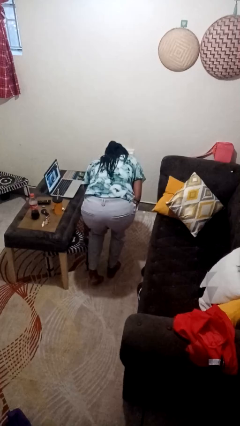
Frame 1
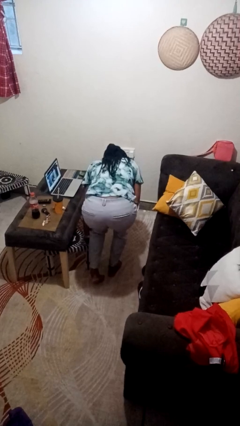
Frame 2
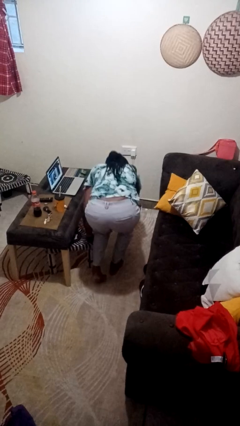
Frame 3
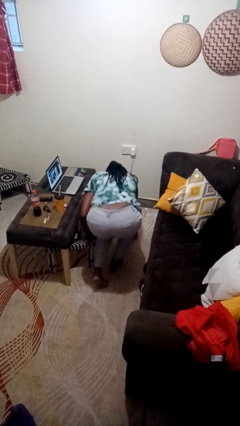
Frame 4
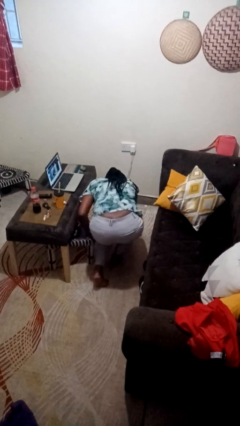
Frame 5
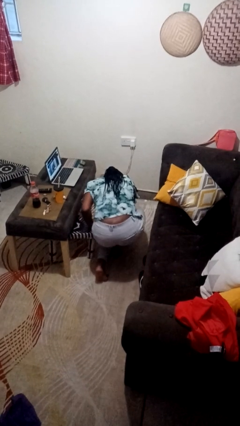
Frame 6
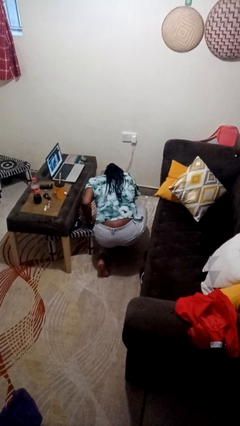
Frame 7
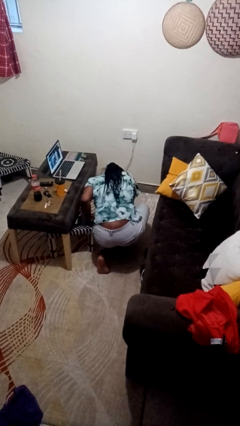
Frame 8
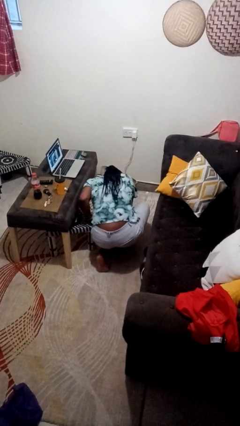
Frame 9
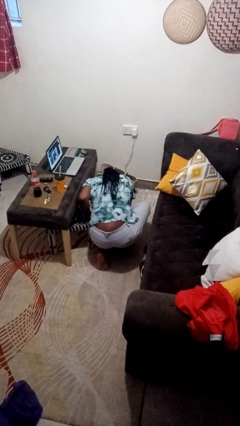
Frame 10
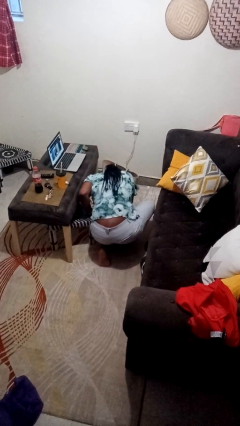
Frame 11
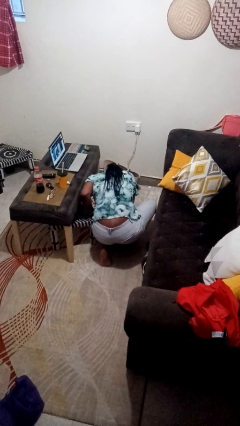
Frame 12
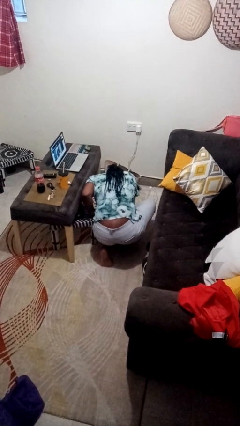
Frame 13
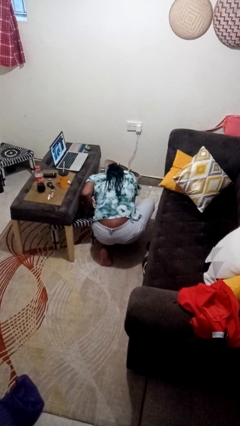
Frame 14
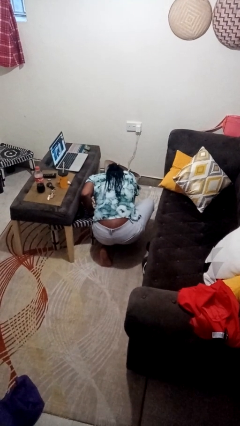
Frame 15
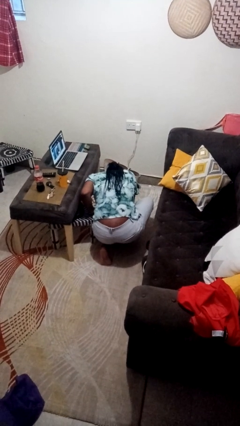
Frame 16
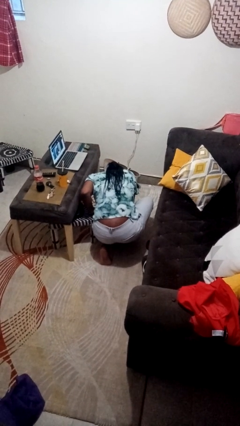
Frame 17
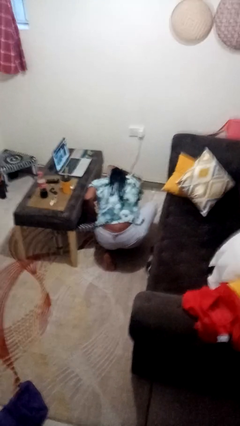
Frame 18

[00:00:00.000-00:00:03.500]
person lies down on floor

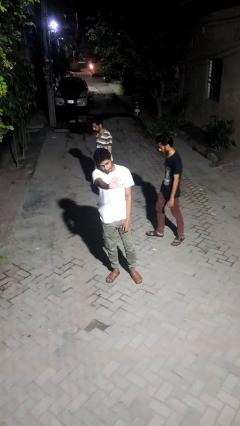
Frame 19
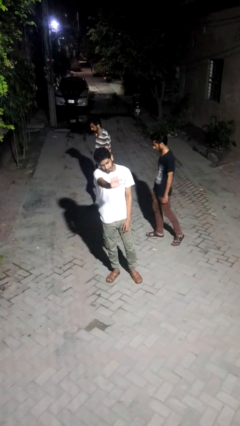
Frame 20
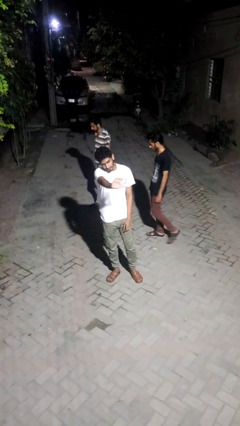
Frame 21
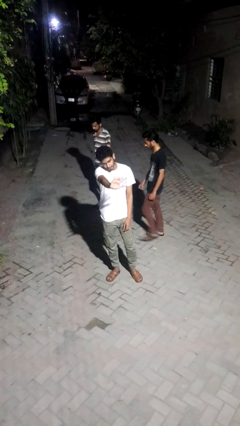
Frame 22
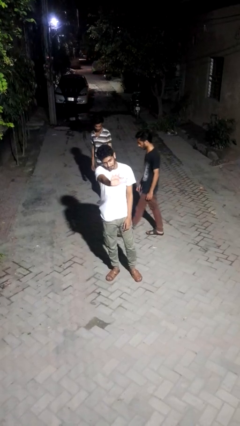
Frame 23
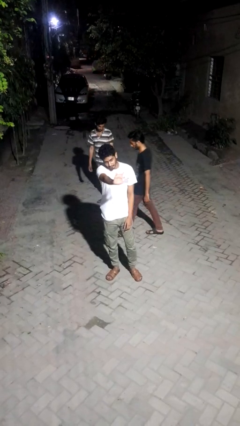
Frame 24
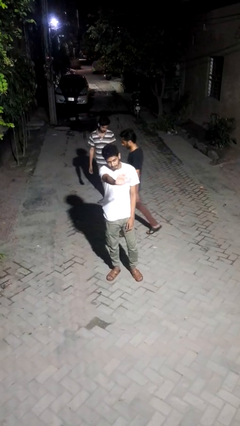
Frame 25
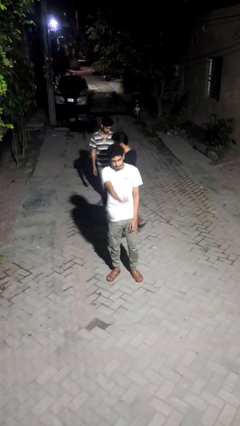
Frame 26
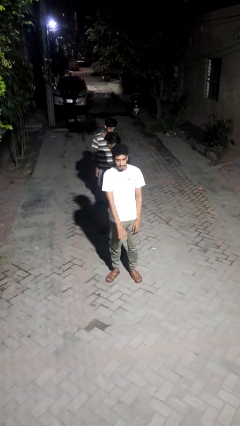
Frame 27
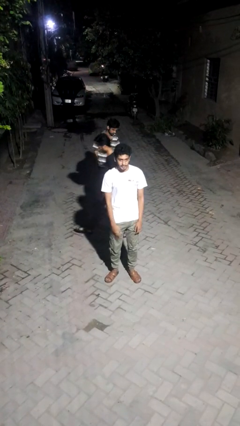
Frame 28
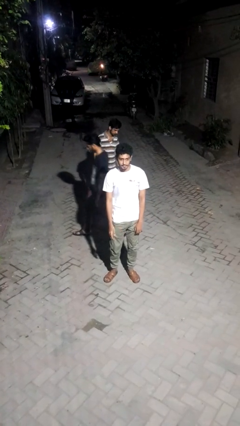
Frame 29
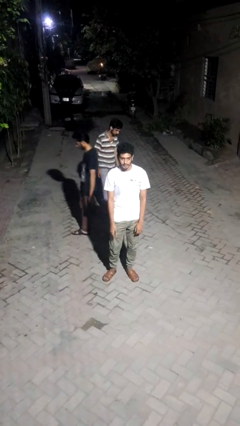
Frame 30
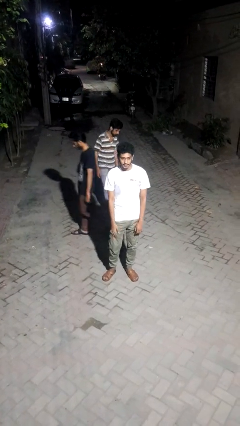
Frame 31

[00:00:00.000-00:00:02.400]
person waves at person

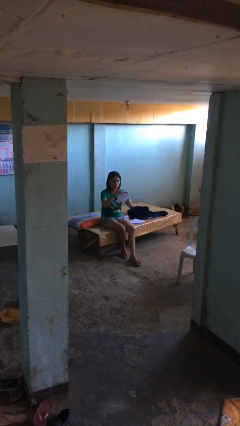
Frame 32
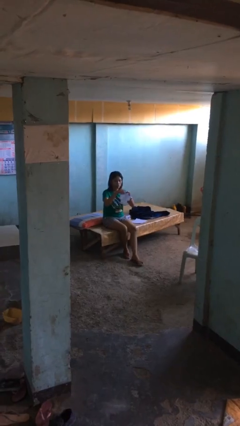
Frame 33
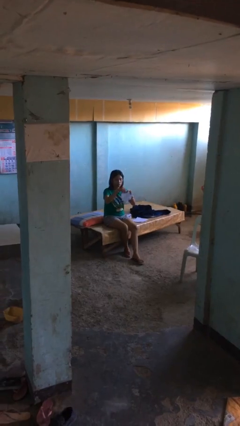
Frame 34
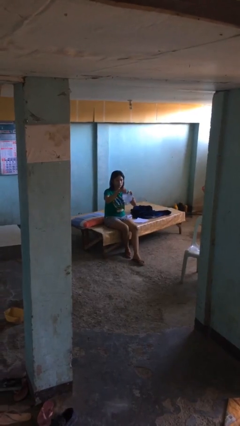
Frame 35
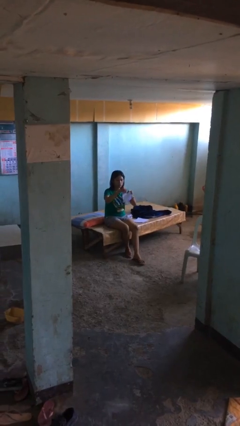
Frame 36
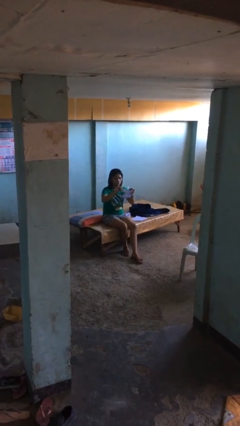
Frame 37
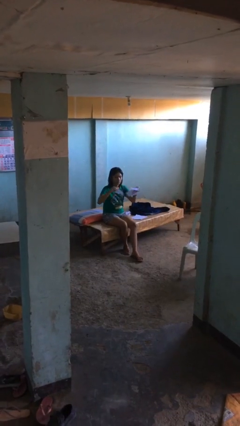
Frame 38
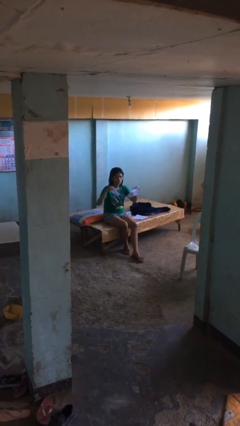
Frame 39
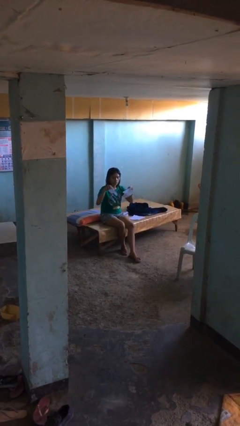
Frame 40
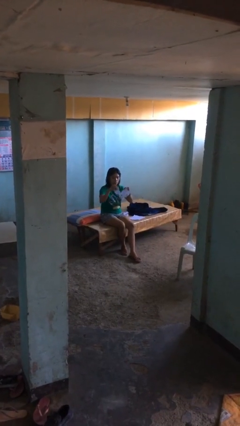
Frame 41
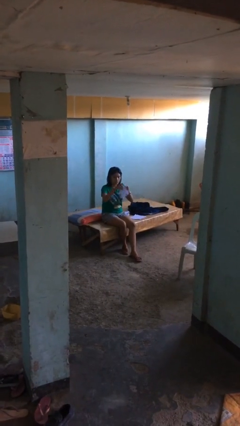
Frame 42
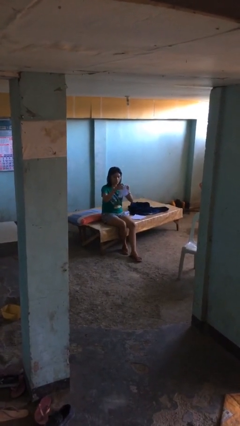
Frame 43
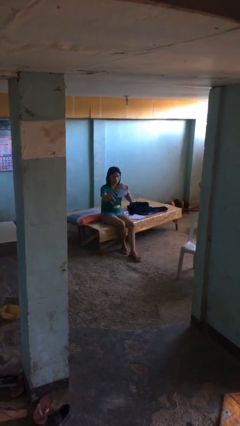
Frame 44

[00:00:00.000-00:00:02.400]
person tears paper

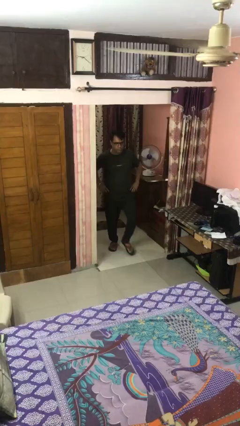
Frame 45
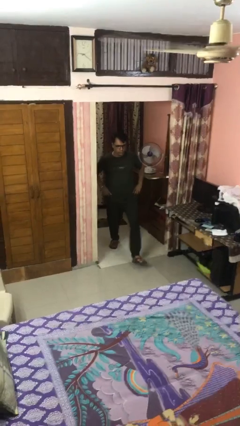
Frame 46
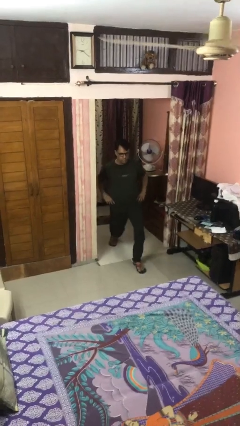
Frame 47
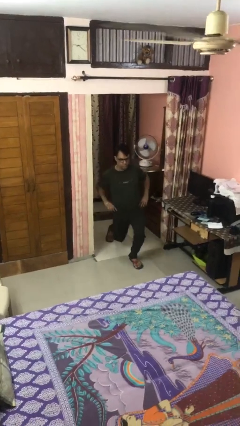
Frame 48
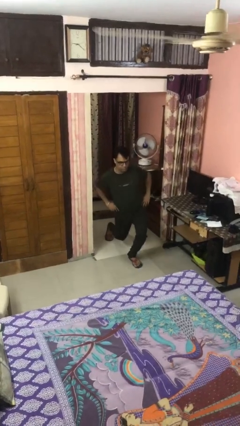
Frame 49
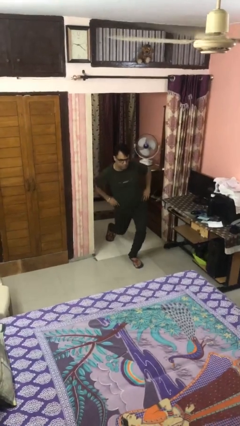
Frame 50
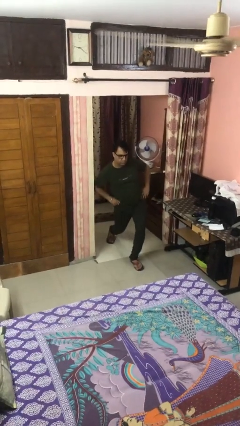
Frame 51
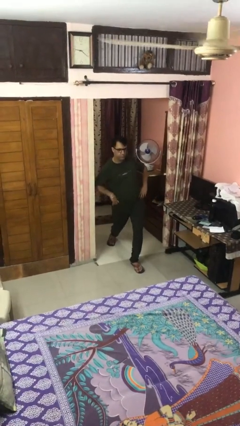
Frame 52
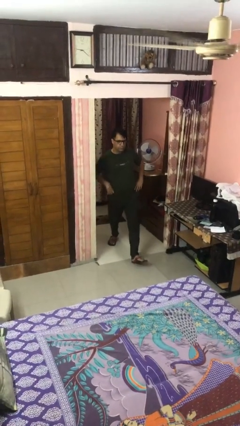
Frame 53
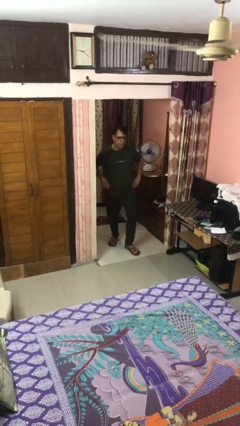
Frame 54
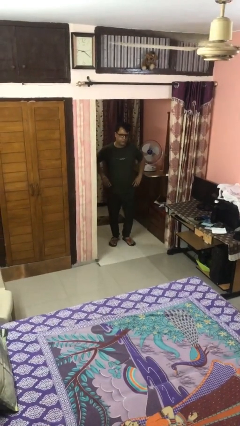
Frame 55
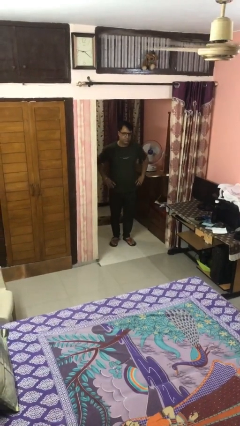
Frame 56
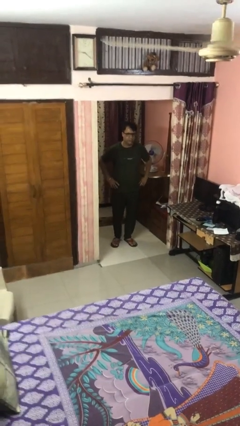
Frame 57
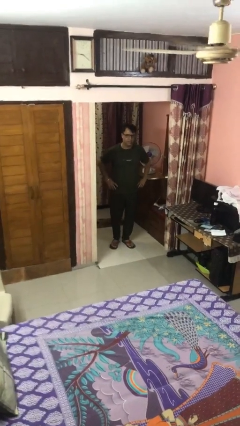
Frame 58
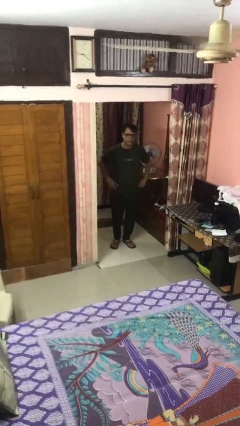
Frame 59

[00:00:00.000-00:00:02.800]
person exercises with lunges

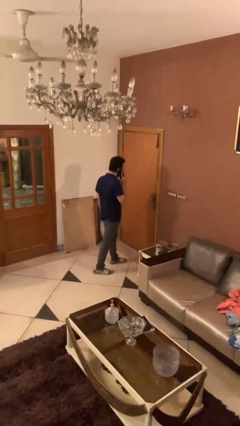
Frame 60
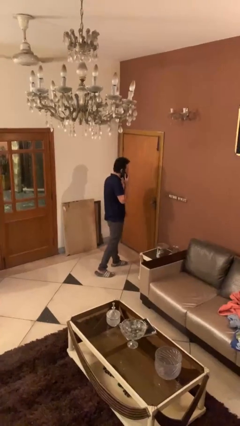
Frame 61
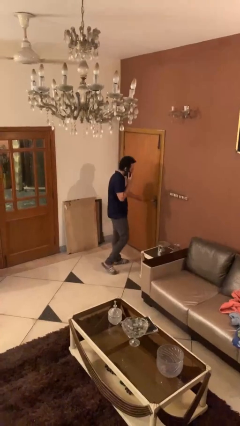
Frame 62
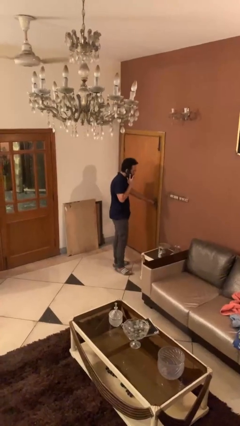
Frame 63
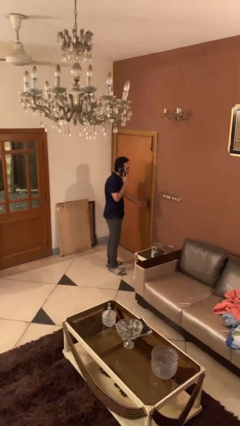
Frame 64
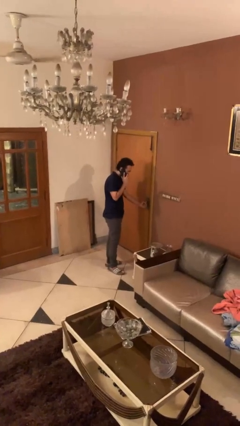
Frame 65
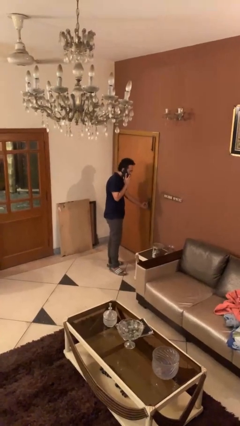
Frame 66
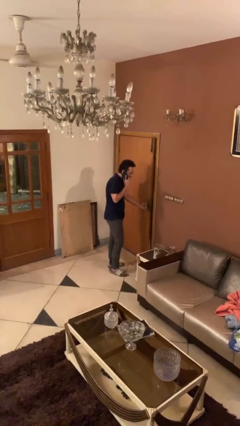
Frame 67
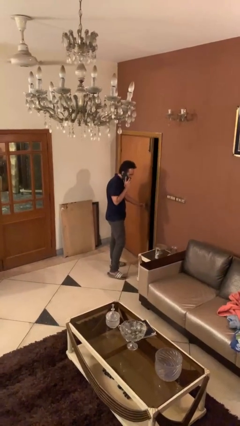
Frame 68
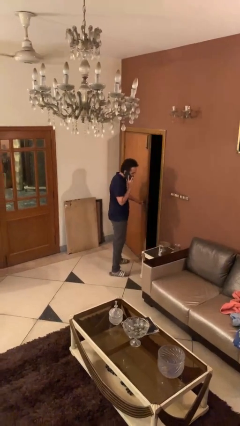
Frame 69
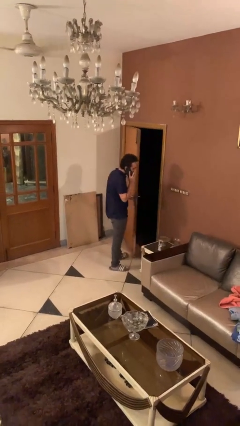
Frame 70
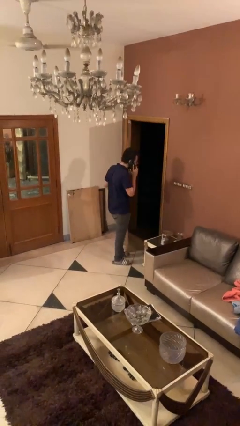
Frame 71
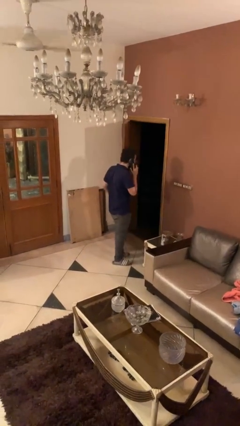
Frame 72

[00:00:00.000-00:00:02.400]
person opens facility door

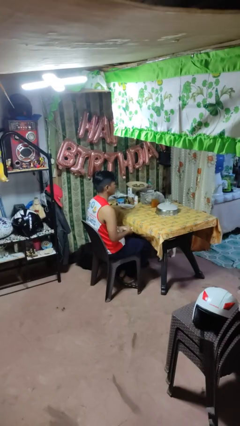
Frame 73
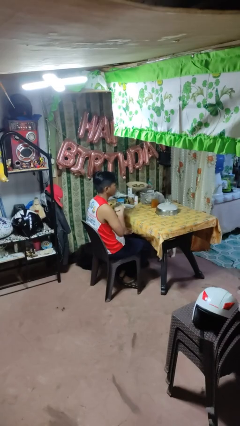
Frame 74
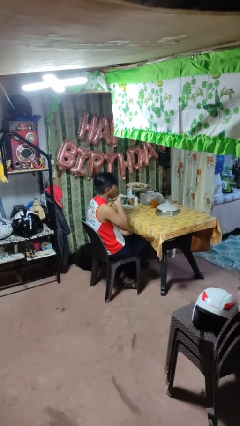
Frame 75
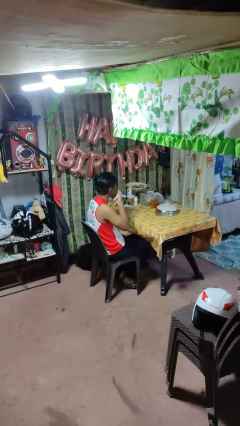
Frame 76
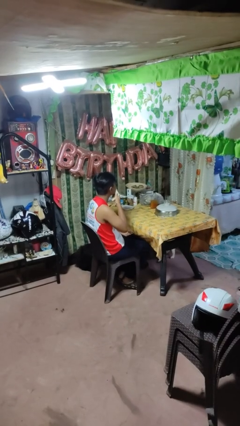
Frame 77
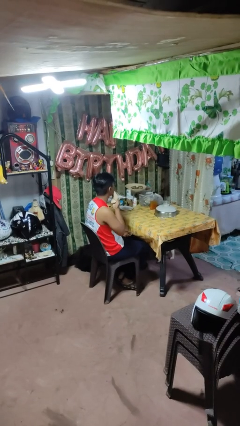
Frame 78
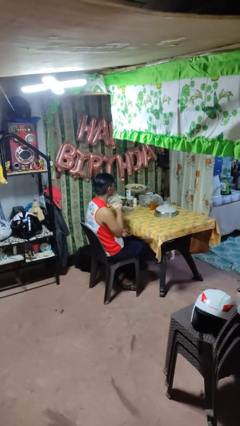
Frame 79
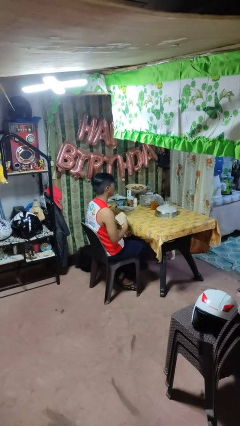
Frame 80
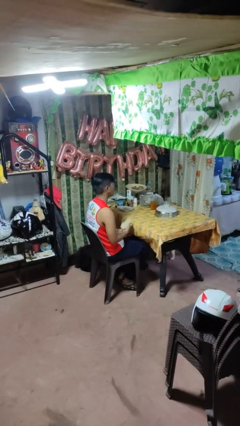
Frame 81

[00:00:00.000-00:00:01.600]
person wipes mouth with napkin

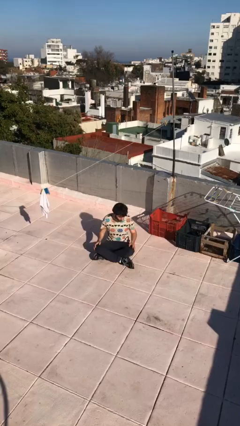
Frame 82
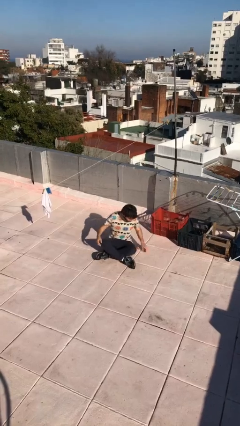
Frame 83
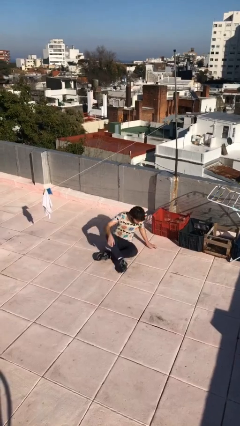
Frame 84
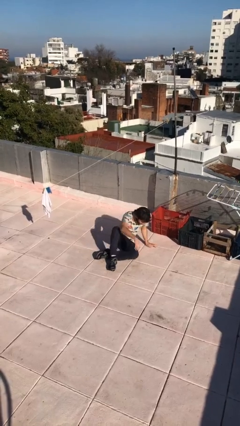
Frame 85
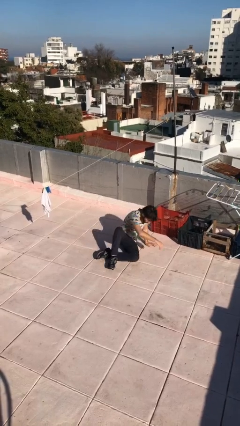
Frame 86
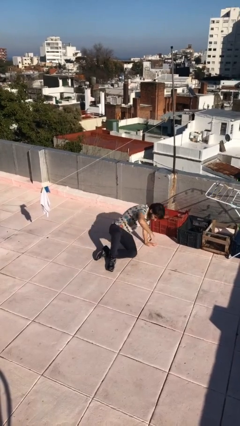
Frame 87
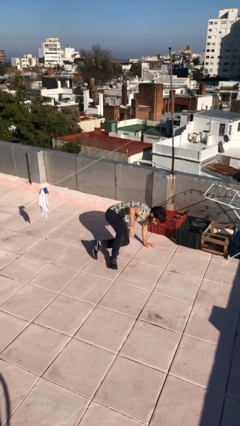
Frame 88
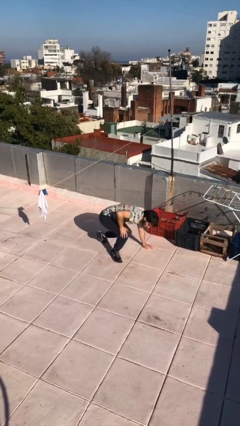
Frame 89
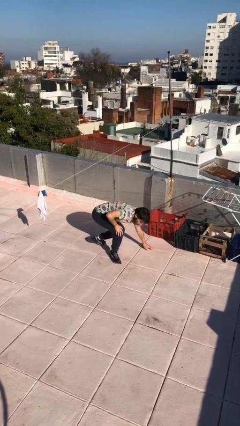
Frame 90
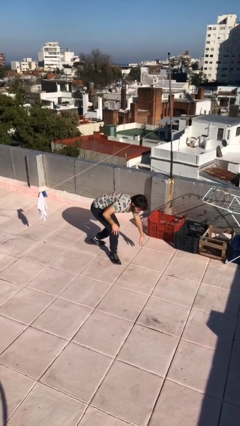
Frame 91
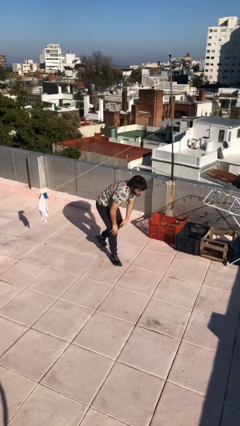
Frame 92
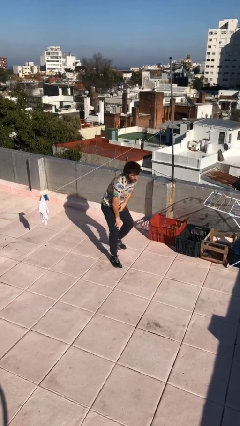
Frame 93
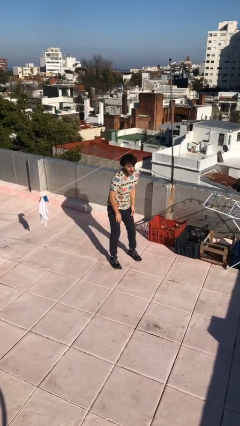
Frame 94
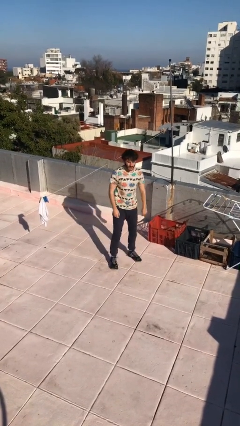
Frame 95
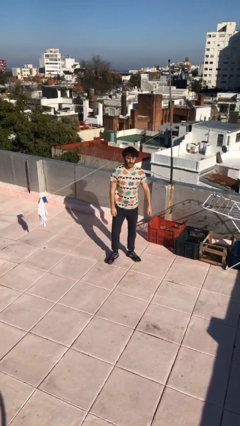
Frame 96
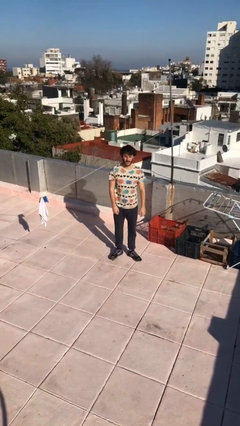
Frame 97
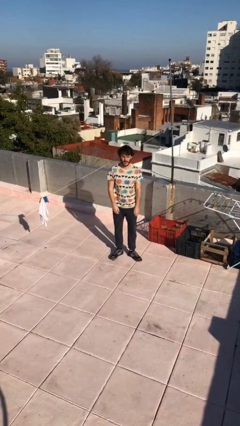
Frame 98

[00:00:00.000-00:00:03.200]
person stands up from floor
